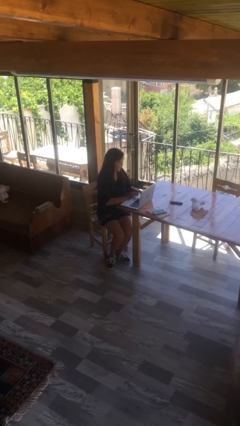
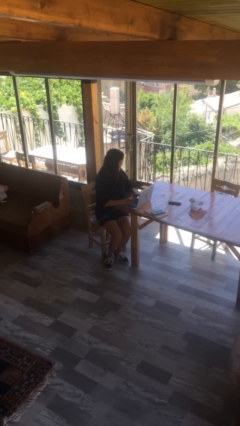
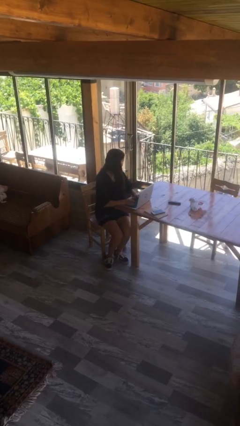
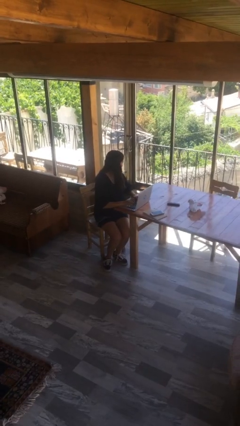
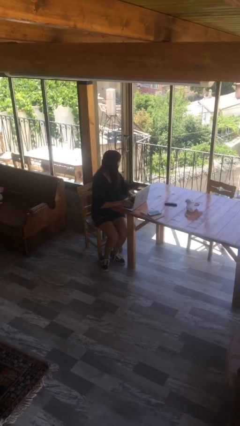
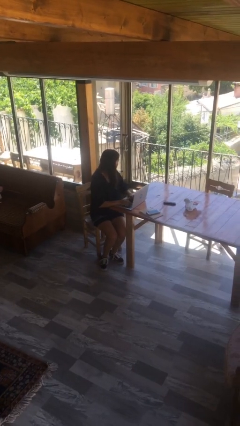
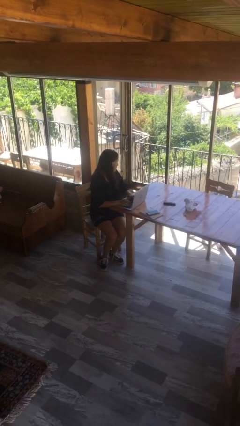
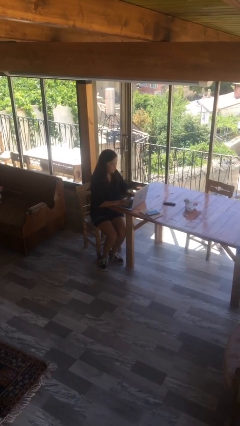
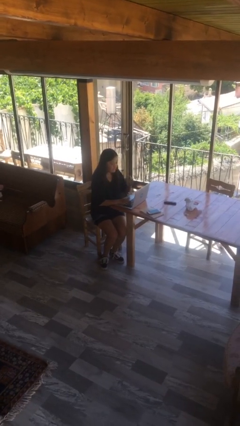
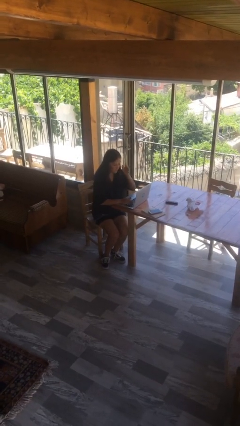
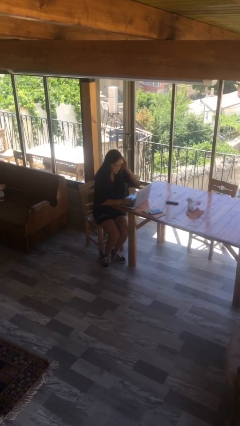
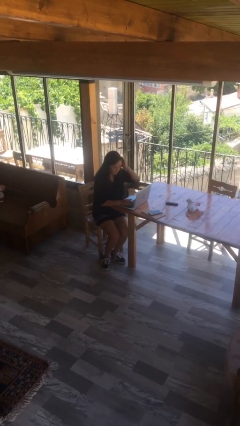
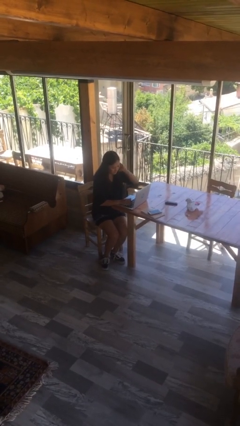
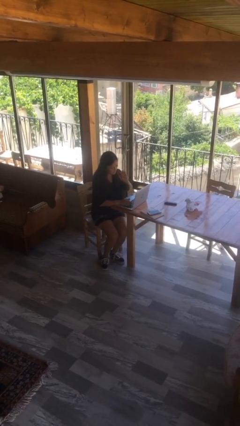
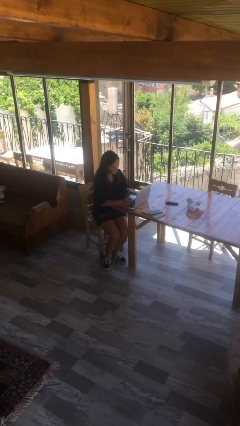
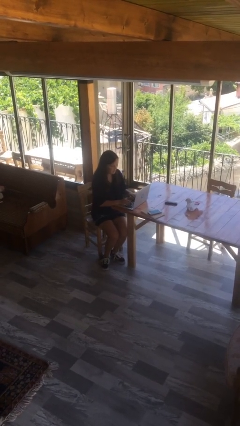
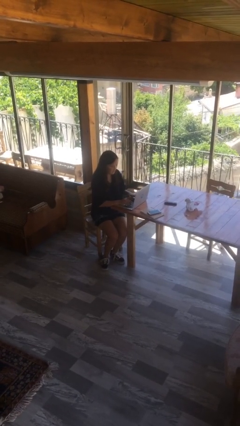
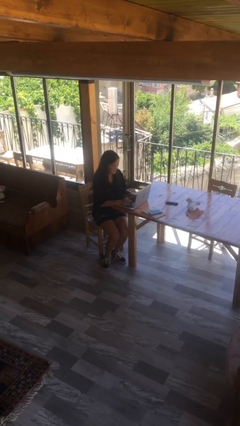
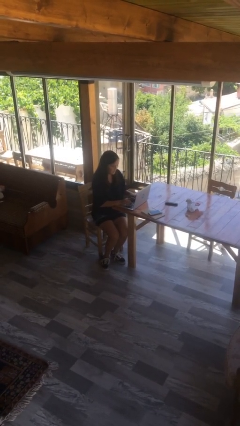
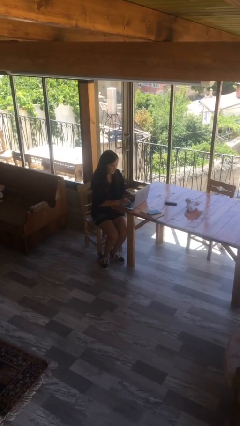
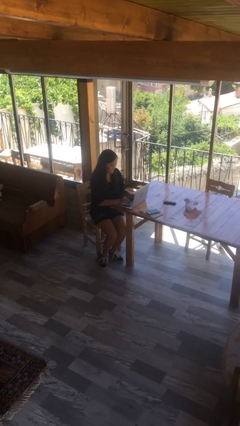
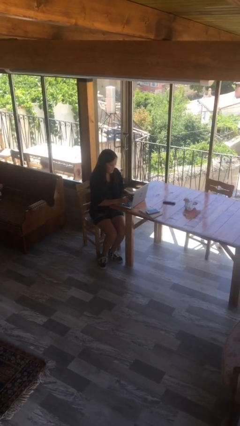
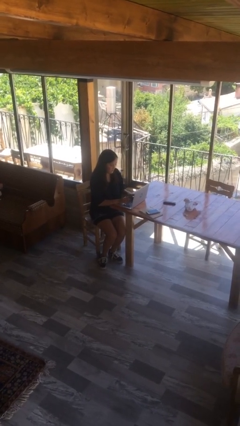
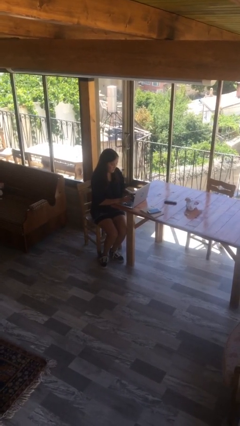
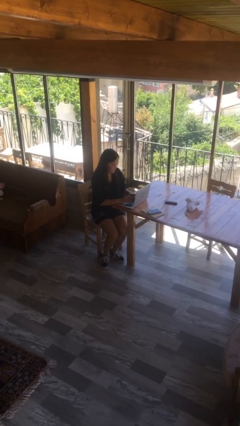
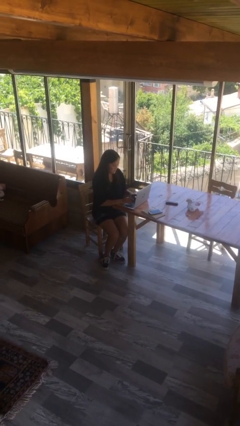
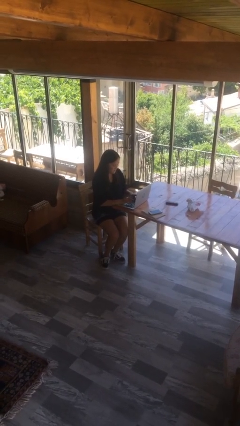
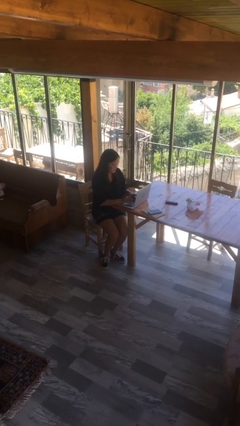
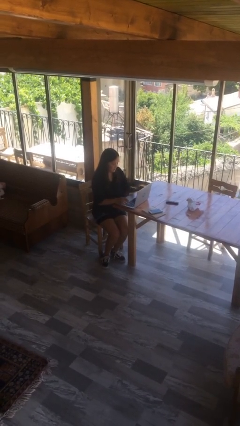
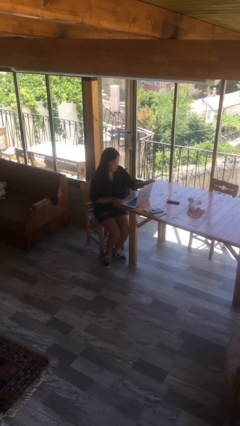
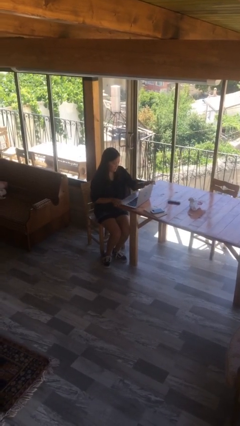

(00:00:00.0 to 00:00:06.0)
person interacts with laptop

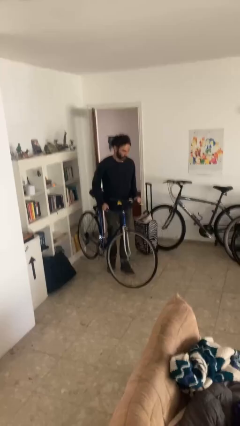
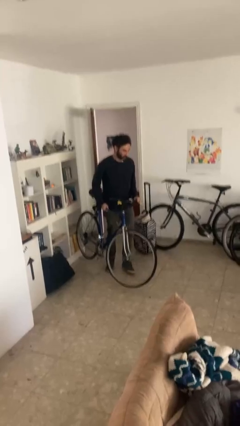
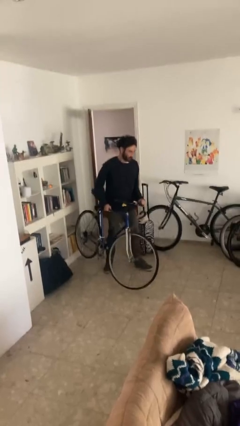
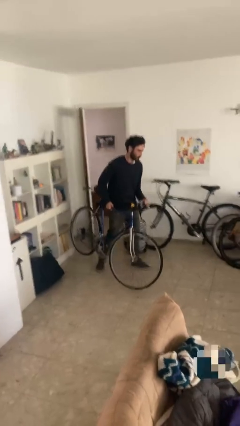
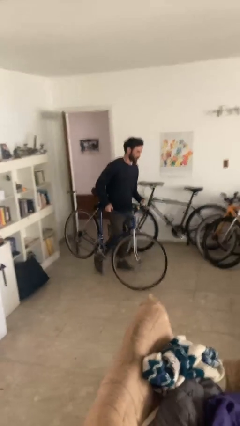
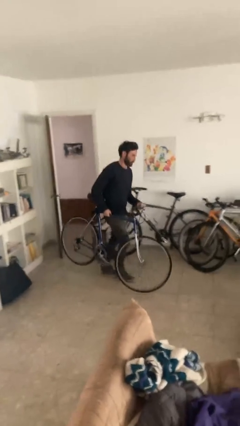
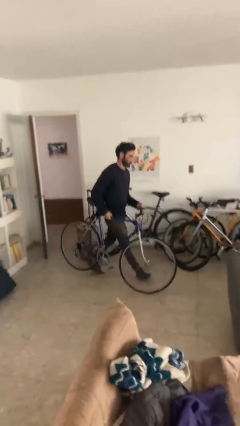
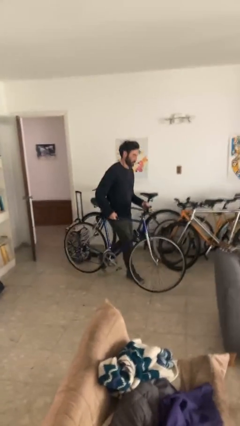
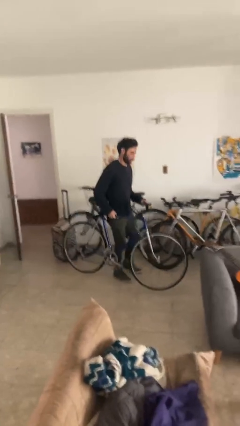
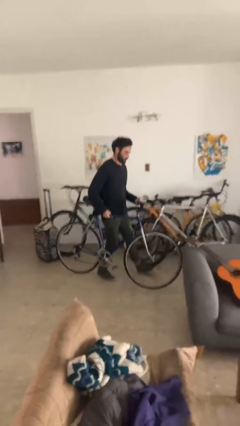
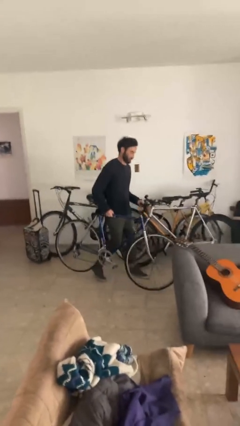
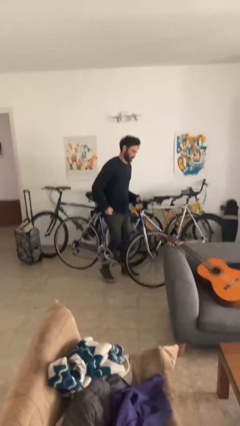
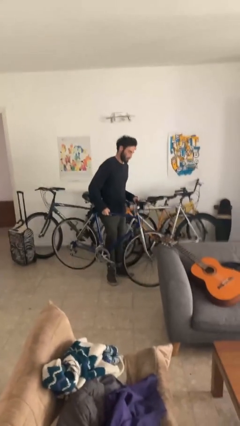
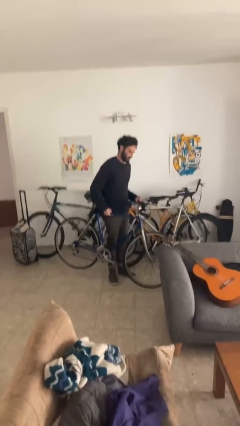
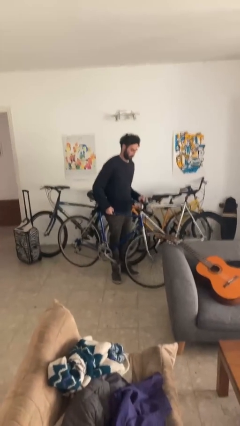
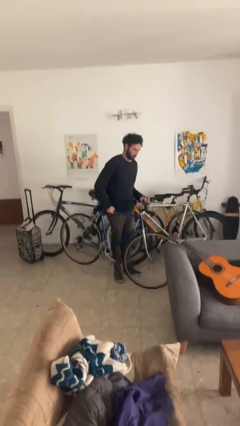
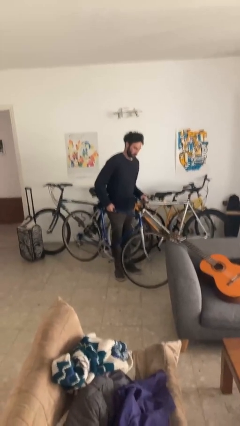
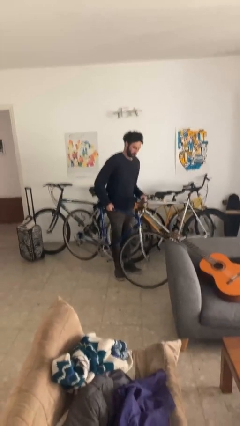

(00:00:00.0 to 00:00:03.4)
person carries bicycle

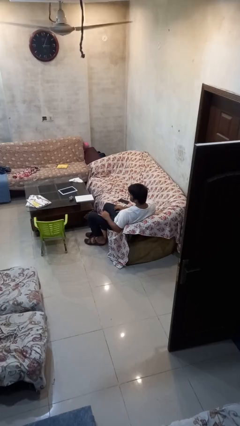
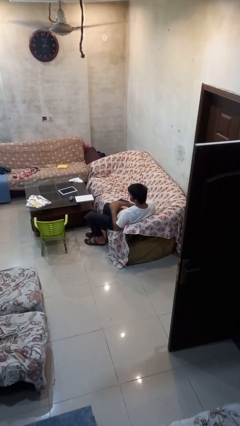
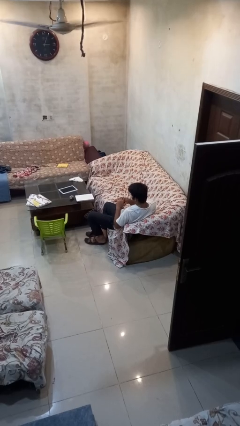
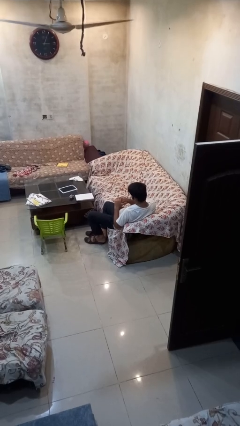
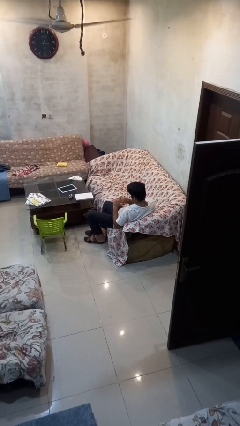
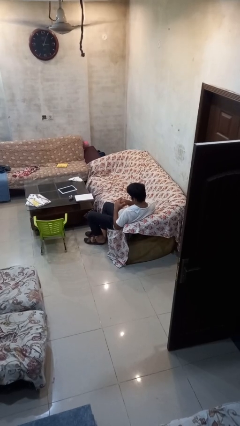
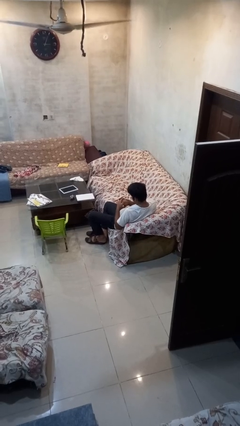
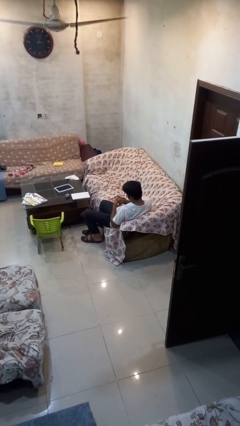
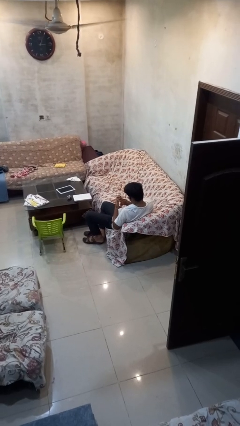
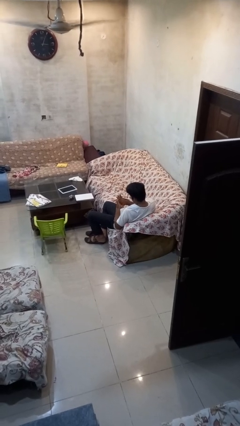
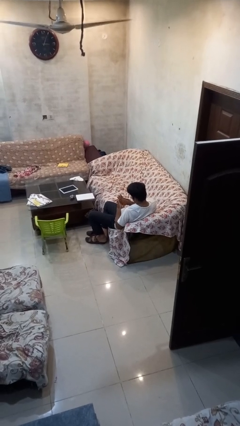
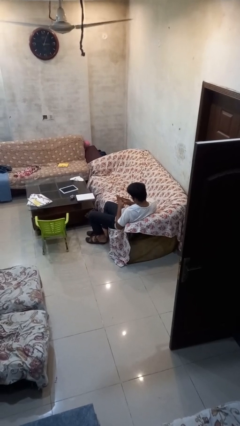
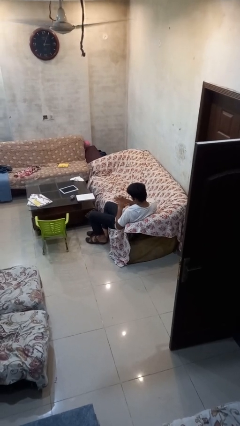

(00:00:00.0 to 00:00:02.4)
person looks at hands in lap

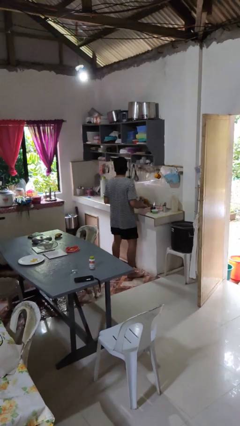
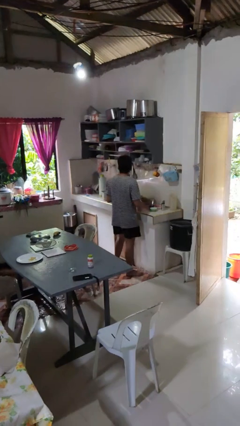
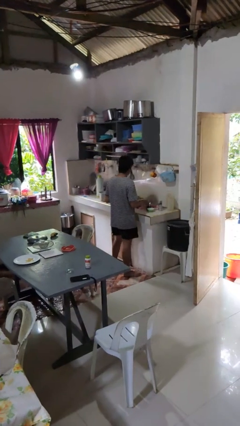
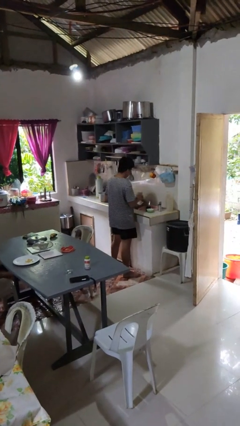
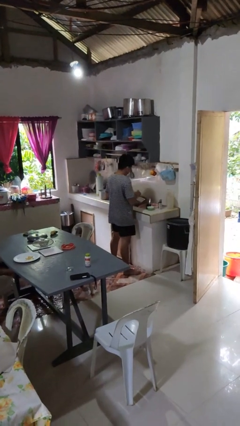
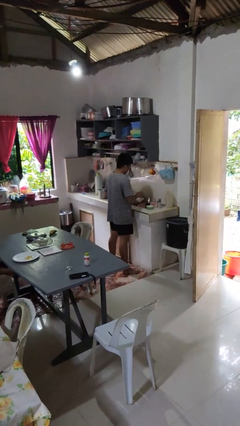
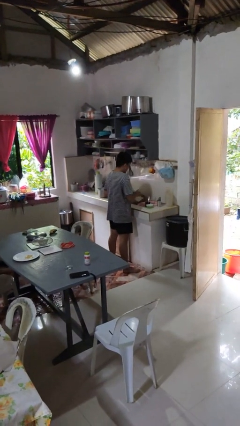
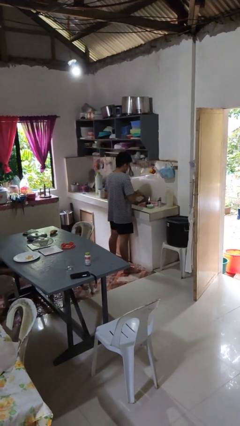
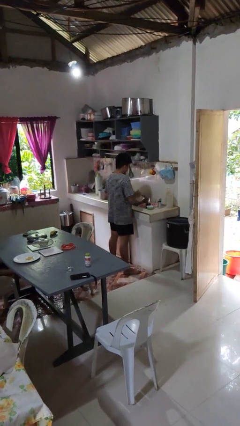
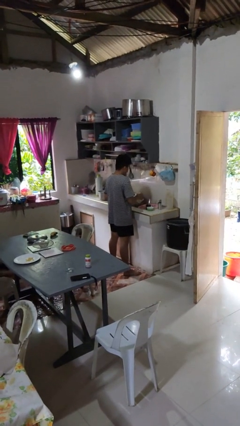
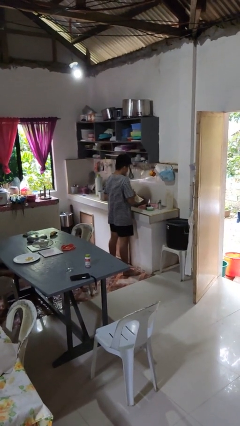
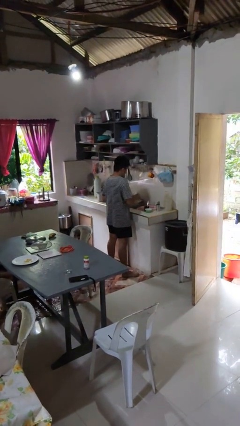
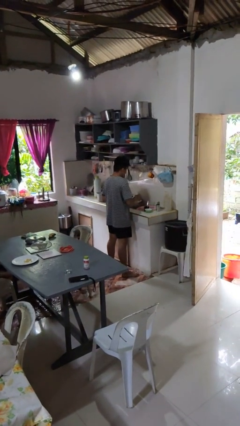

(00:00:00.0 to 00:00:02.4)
person washes dish

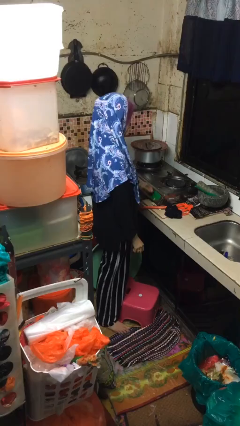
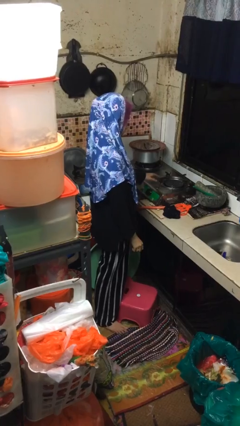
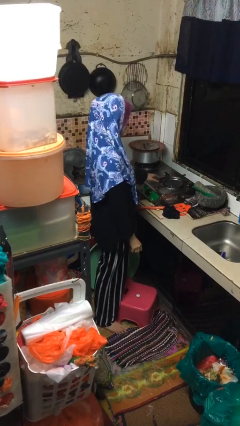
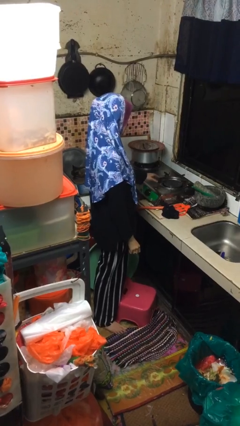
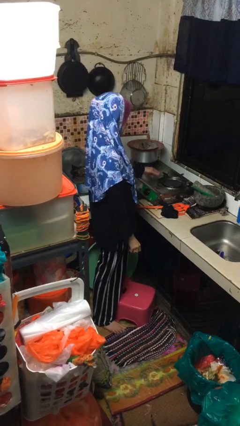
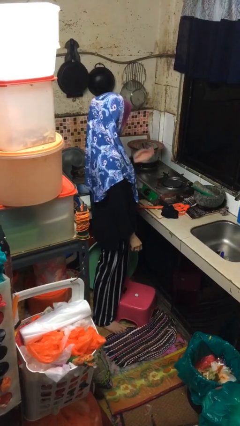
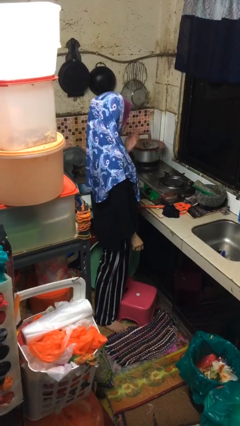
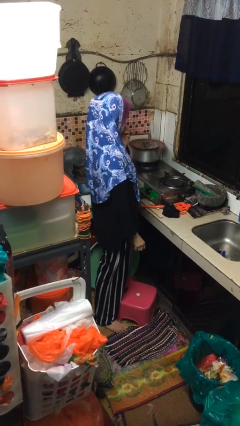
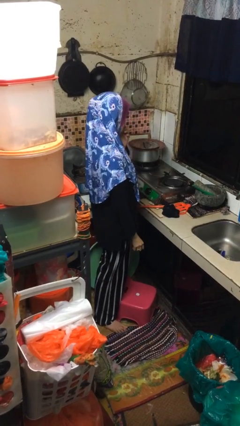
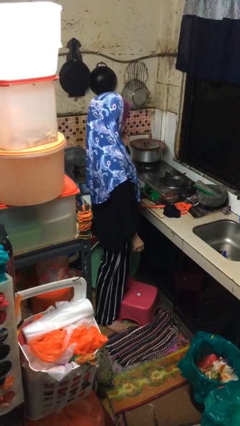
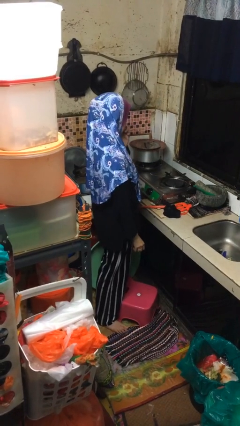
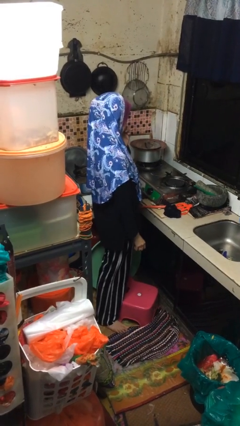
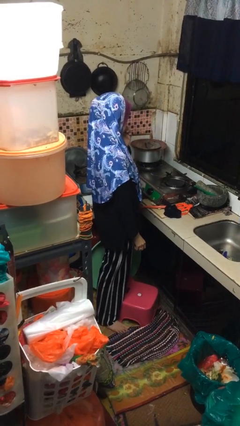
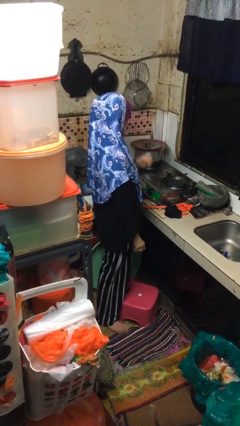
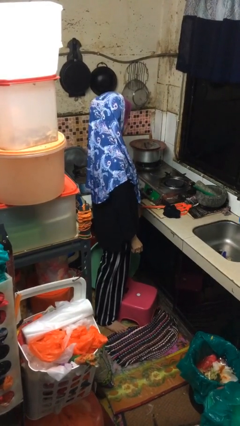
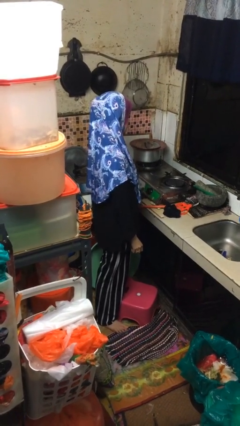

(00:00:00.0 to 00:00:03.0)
person burns hand

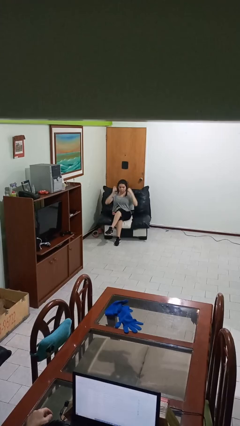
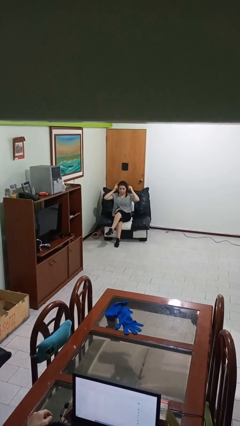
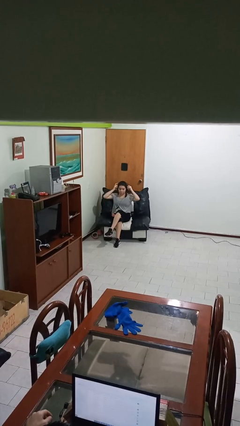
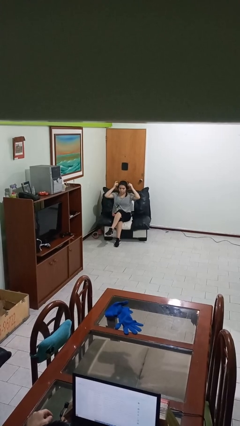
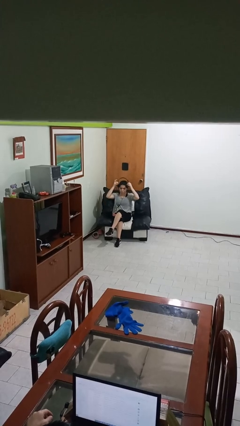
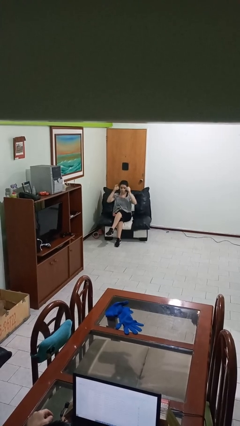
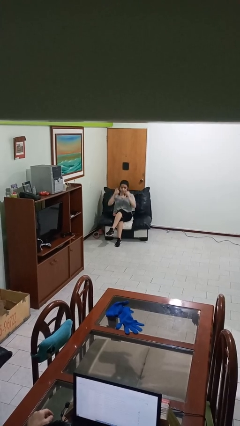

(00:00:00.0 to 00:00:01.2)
person takes off headphones
